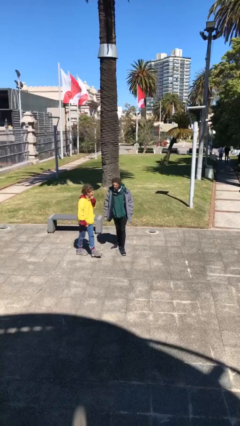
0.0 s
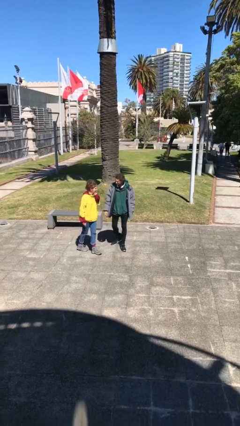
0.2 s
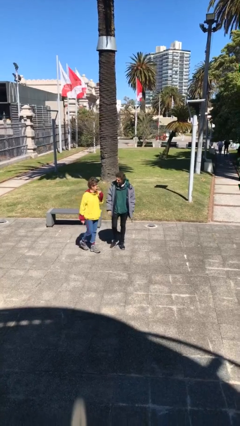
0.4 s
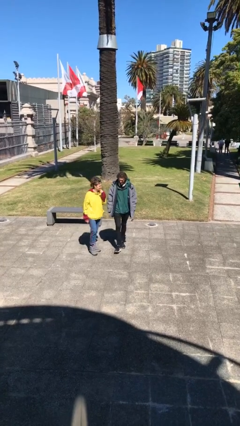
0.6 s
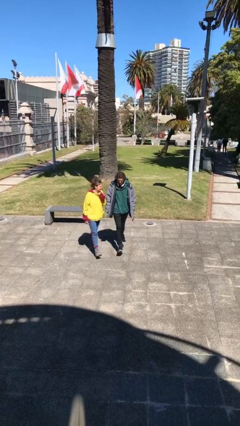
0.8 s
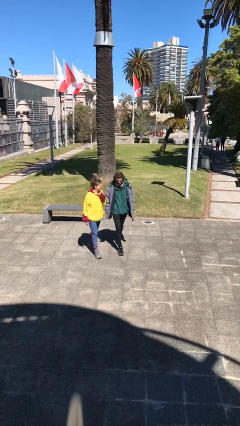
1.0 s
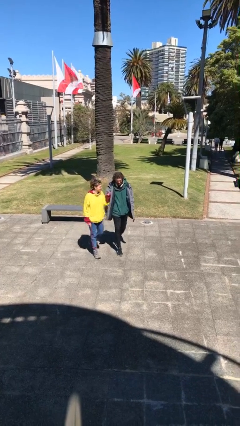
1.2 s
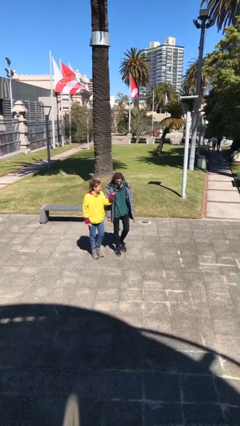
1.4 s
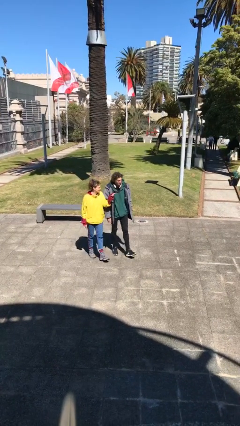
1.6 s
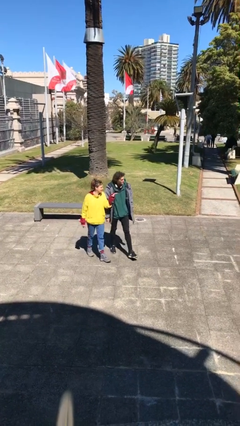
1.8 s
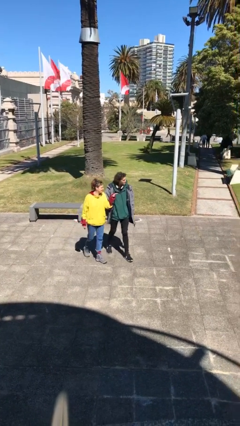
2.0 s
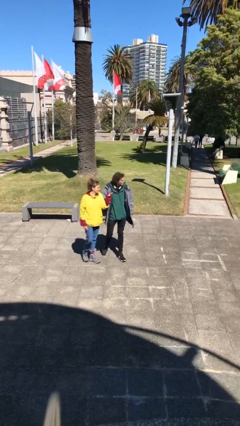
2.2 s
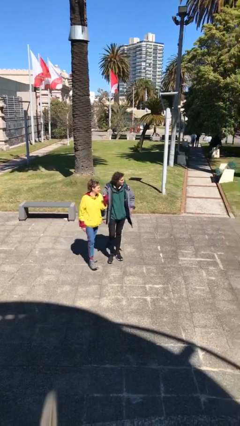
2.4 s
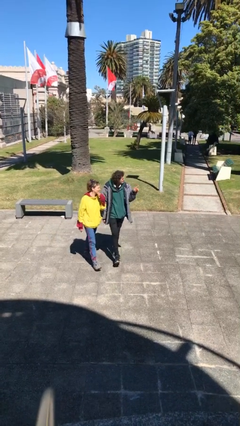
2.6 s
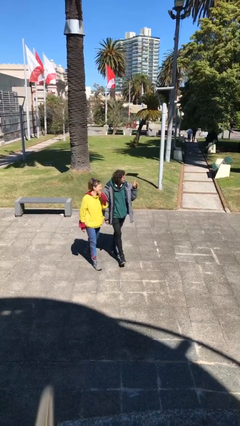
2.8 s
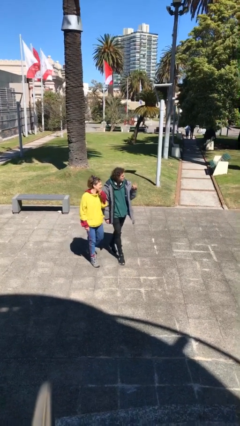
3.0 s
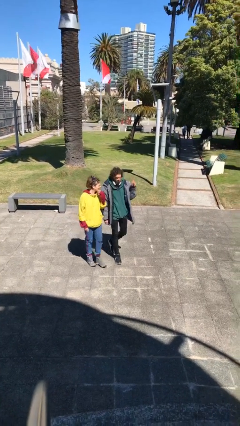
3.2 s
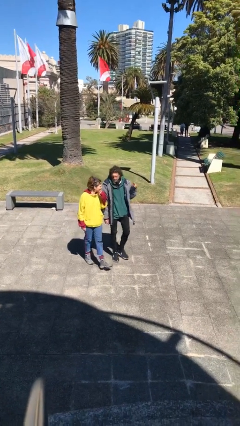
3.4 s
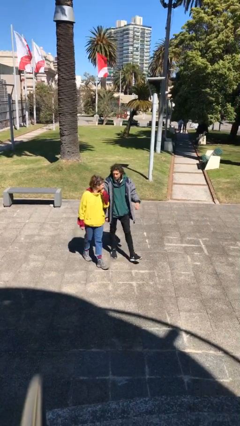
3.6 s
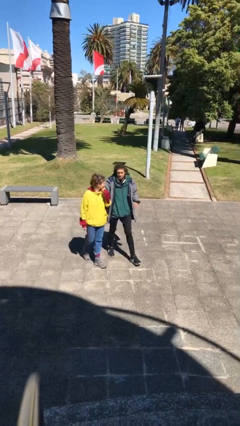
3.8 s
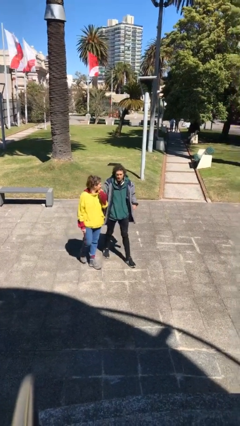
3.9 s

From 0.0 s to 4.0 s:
person talks to person

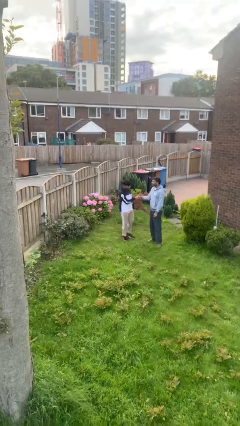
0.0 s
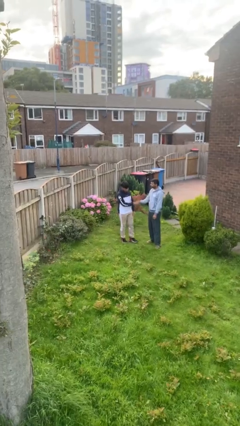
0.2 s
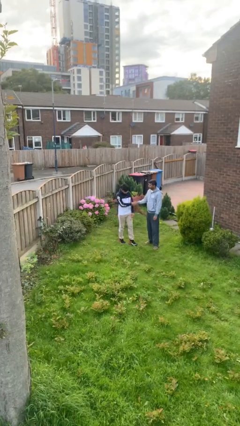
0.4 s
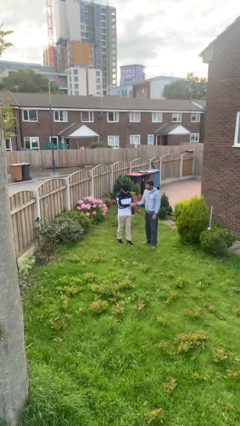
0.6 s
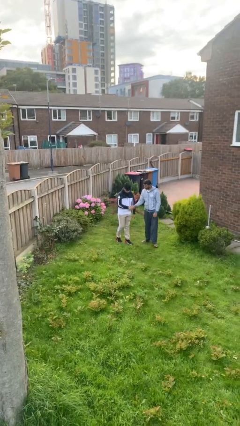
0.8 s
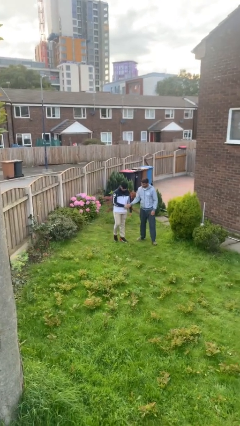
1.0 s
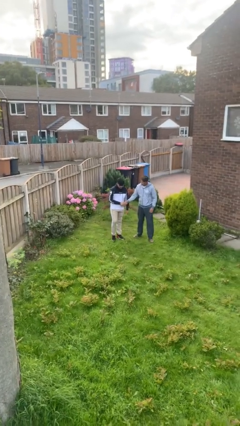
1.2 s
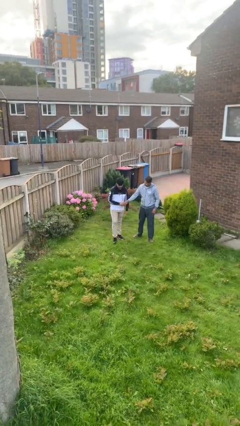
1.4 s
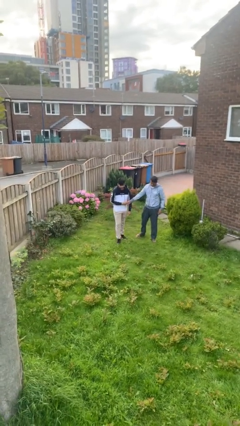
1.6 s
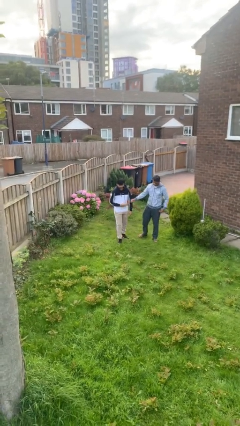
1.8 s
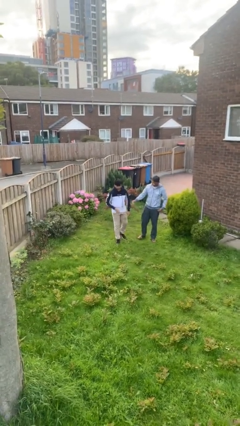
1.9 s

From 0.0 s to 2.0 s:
person shakes hand

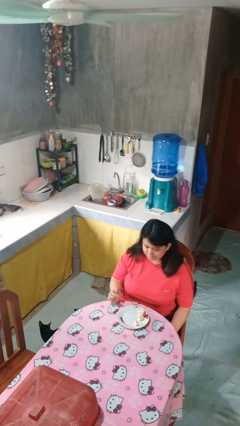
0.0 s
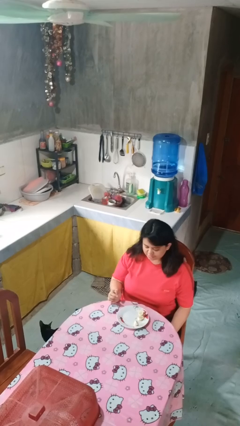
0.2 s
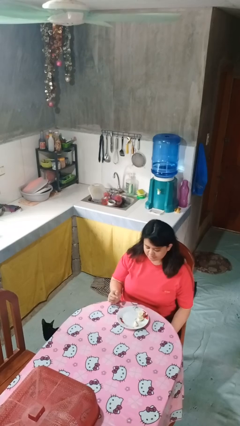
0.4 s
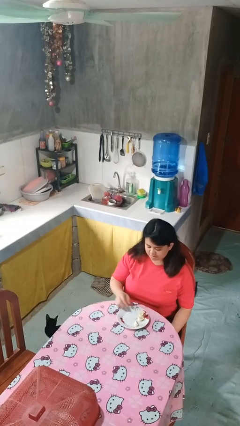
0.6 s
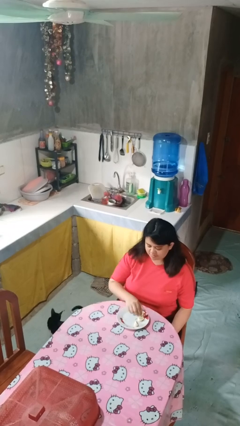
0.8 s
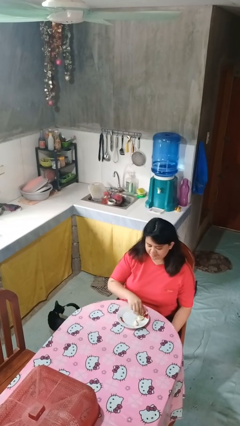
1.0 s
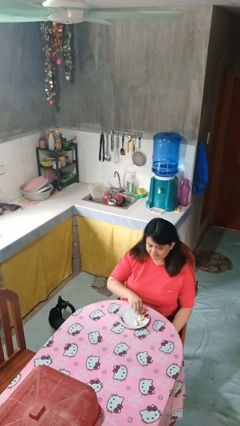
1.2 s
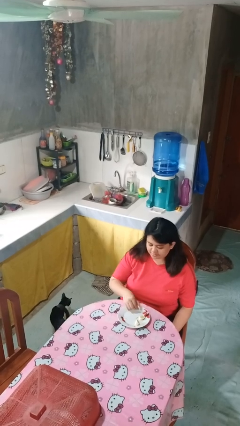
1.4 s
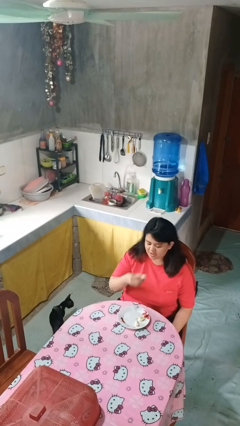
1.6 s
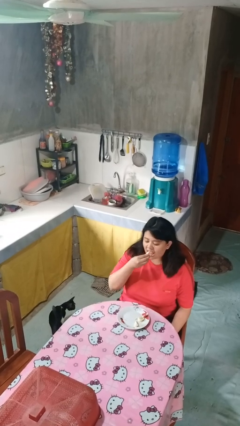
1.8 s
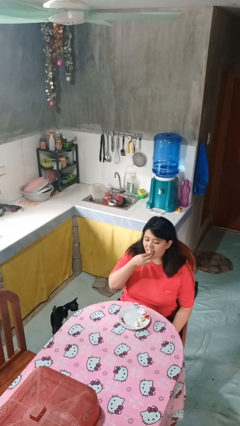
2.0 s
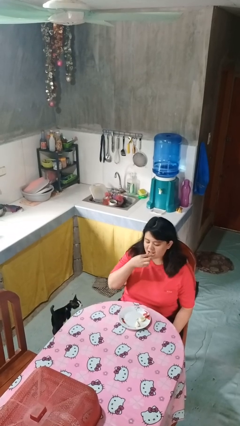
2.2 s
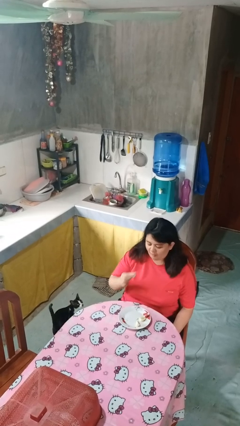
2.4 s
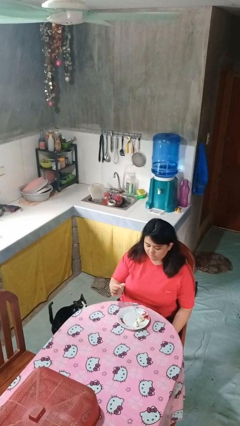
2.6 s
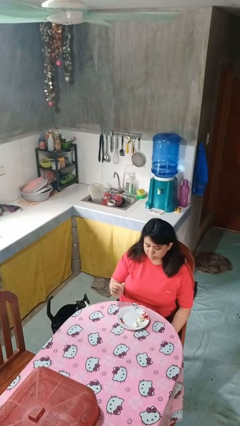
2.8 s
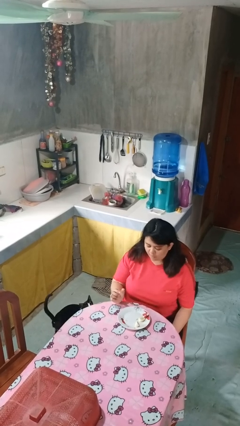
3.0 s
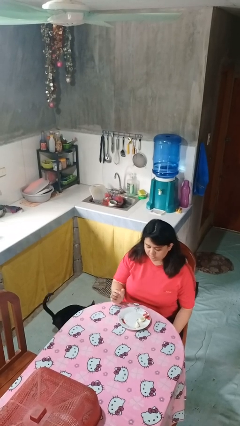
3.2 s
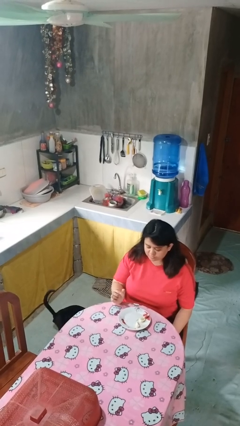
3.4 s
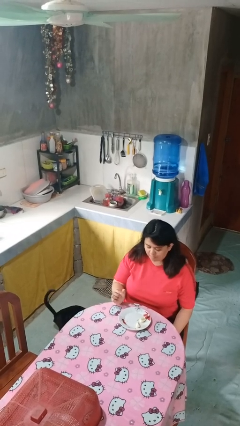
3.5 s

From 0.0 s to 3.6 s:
person eats with hands

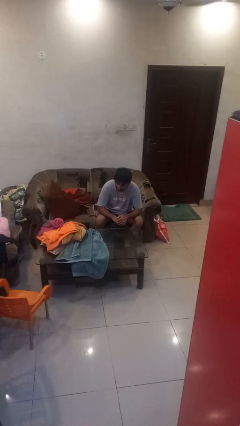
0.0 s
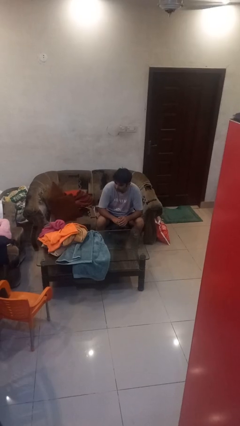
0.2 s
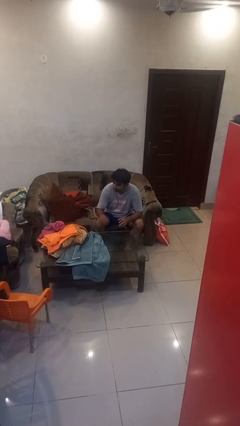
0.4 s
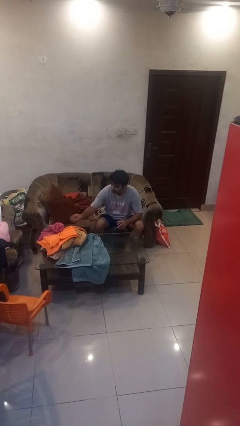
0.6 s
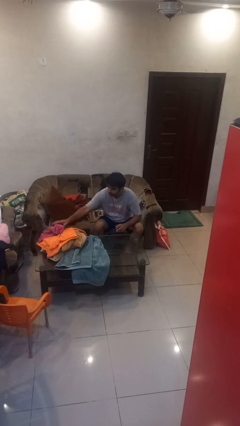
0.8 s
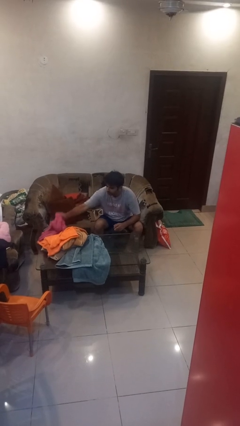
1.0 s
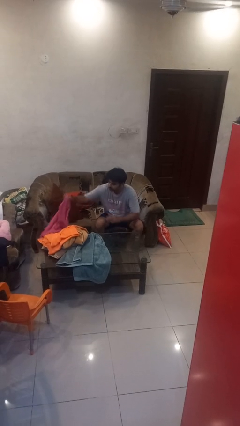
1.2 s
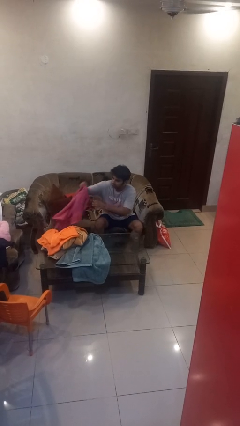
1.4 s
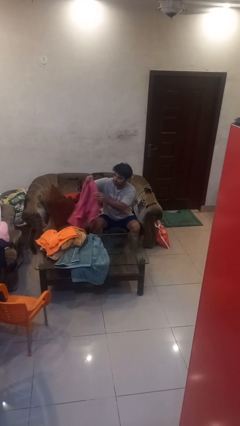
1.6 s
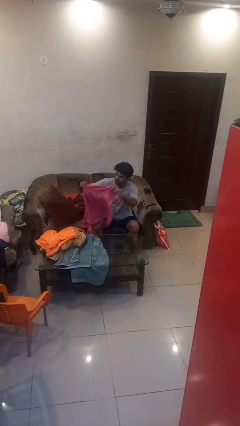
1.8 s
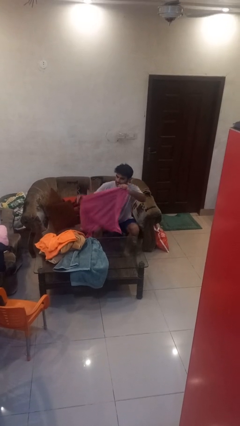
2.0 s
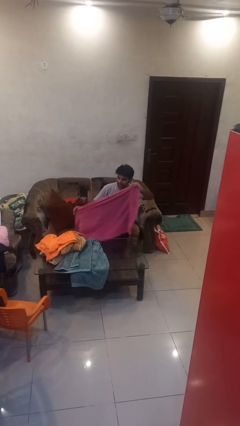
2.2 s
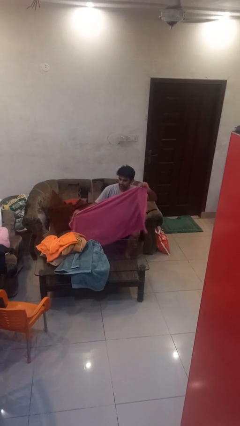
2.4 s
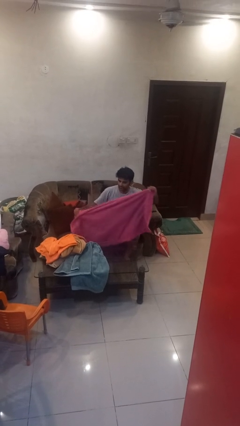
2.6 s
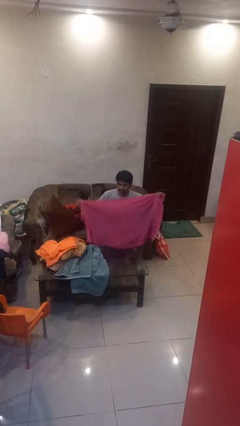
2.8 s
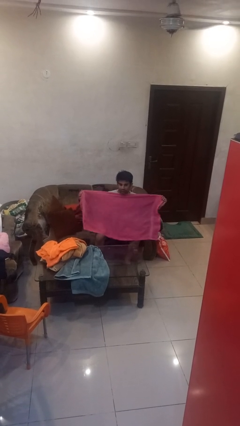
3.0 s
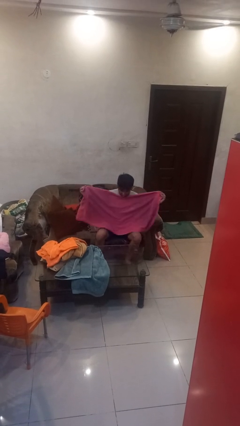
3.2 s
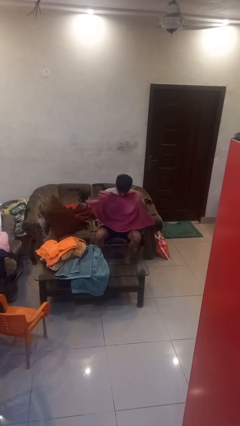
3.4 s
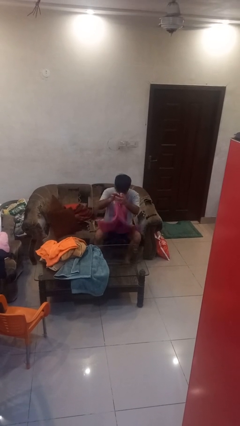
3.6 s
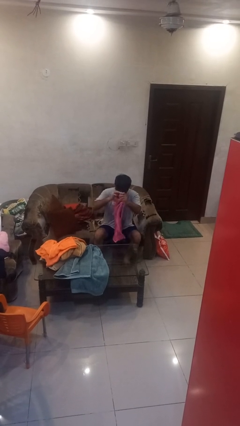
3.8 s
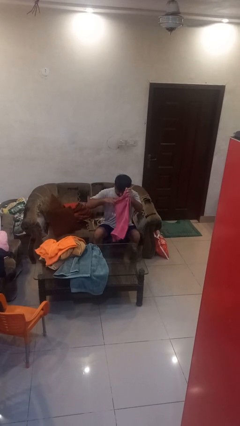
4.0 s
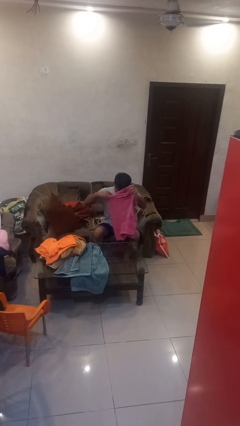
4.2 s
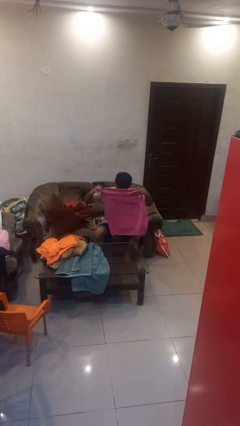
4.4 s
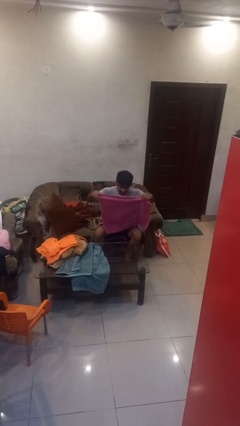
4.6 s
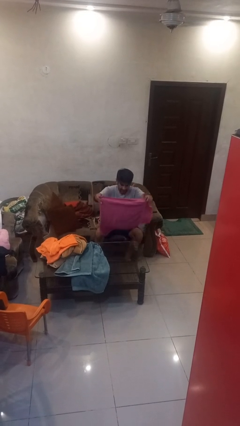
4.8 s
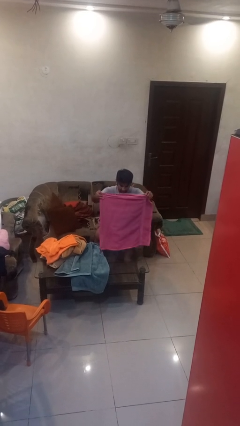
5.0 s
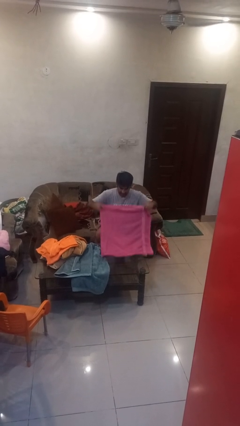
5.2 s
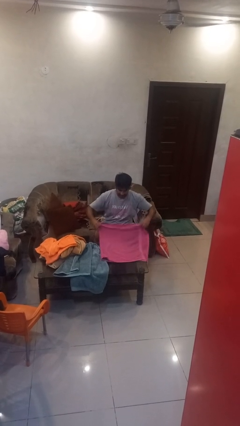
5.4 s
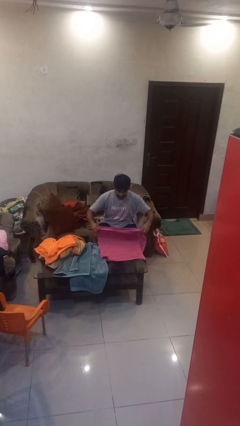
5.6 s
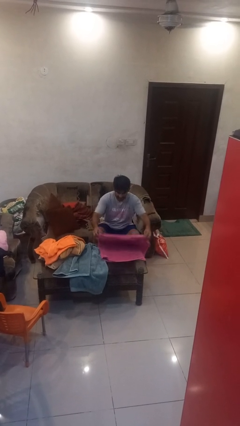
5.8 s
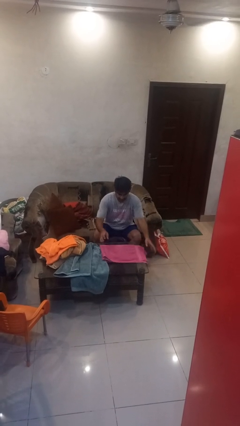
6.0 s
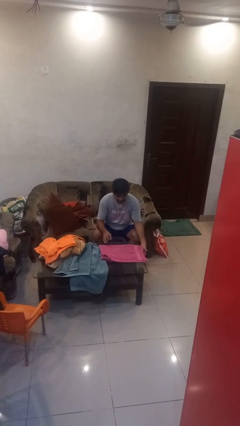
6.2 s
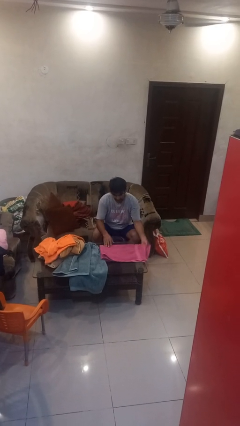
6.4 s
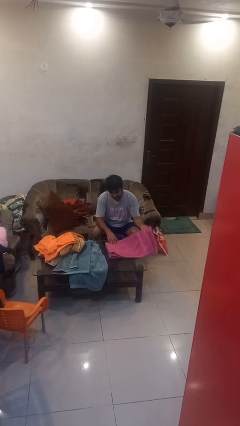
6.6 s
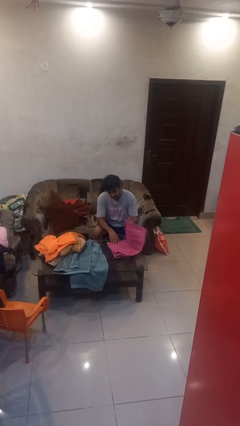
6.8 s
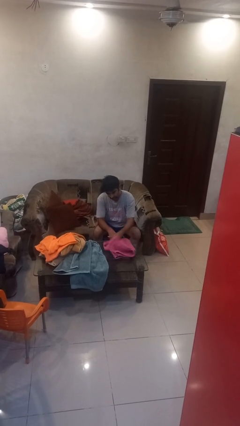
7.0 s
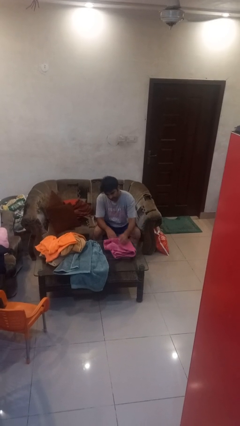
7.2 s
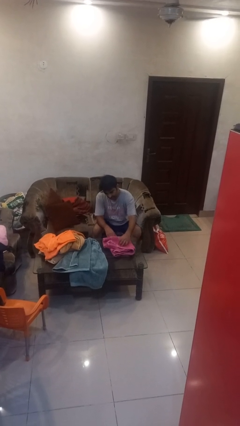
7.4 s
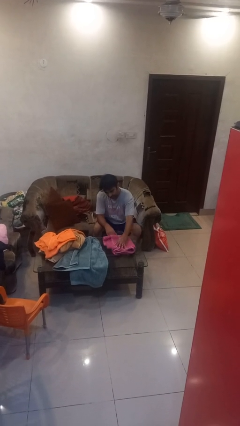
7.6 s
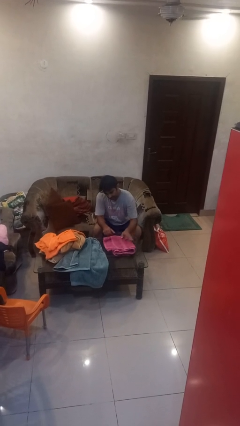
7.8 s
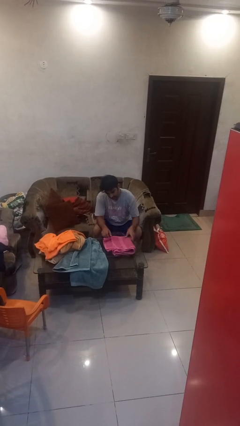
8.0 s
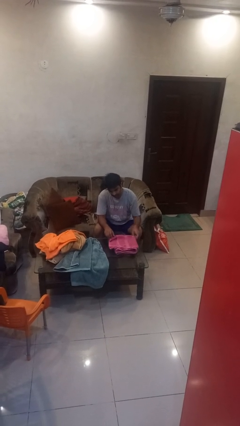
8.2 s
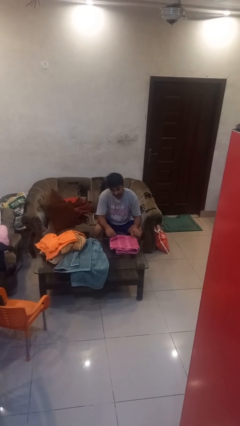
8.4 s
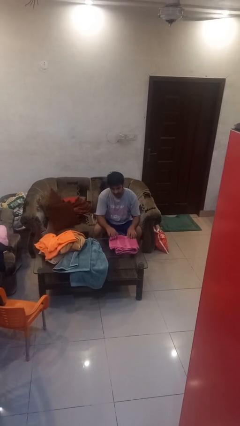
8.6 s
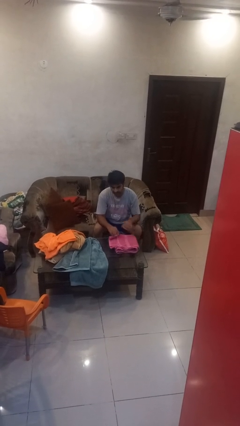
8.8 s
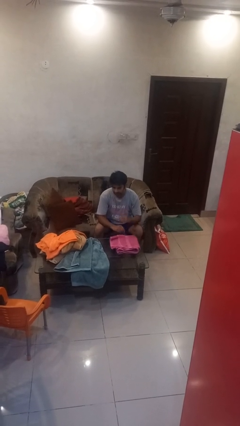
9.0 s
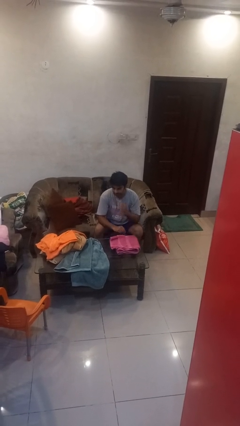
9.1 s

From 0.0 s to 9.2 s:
person folds towel
